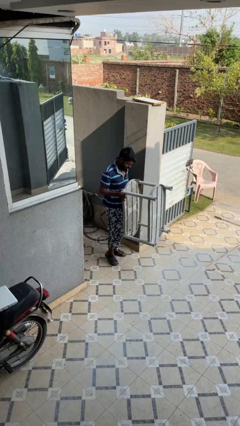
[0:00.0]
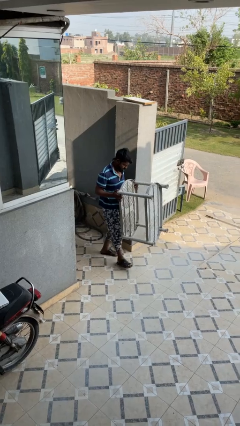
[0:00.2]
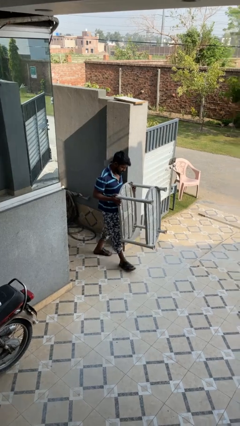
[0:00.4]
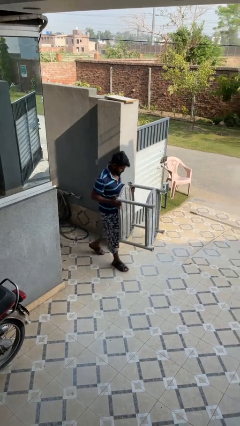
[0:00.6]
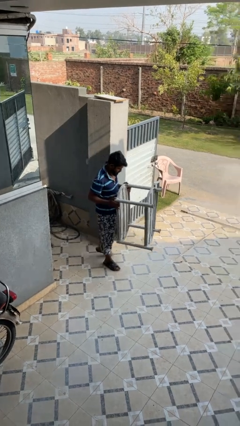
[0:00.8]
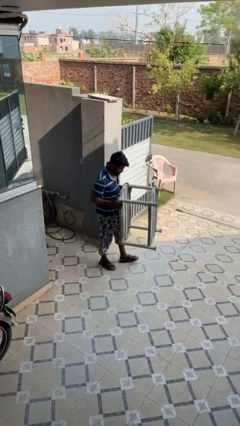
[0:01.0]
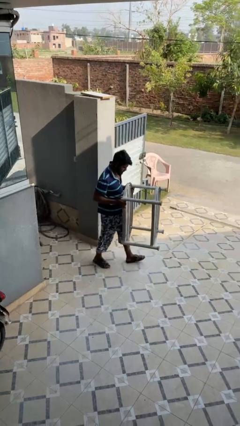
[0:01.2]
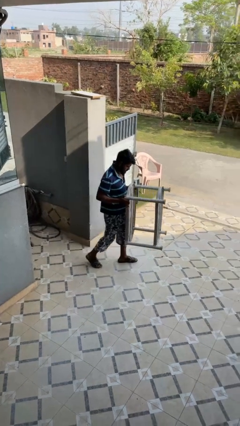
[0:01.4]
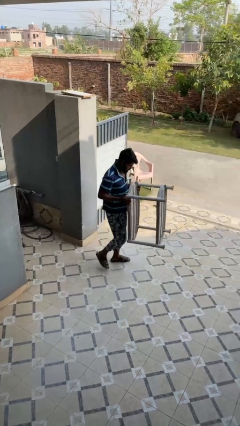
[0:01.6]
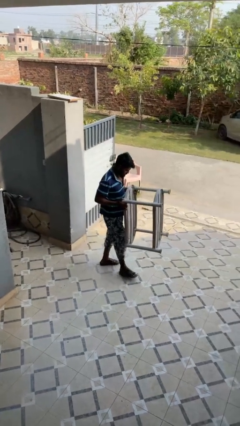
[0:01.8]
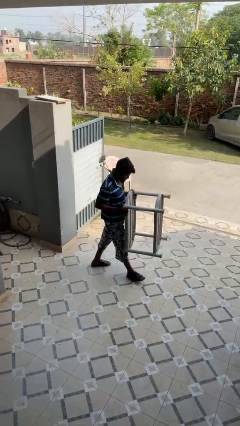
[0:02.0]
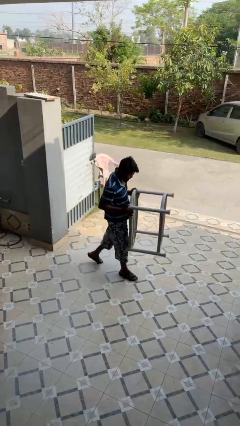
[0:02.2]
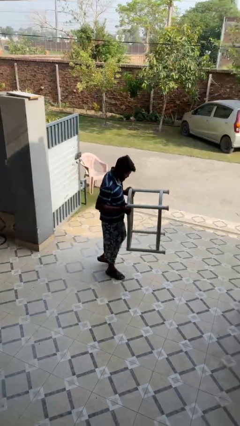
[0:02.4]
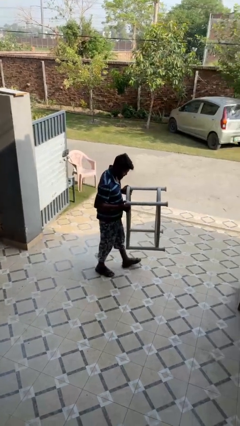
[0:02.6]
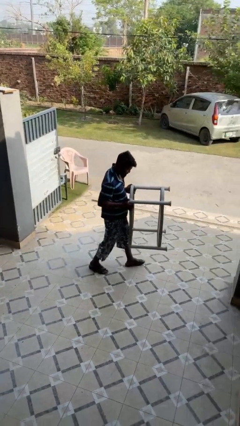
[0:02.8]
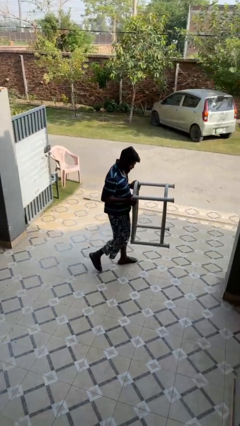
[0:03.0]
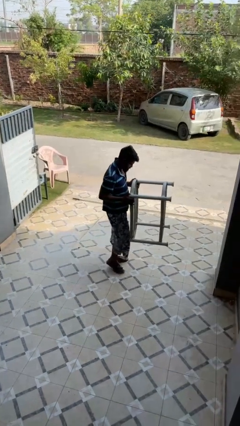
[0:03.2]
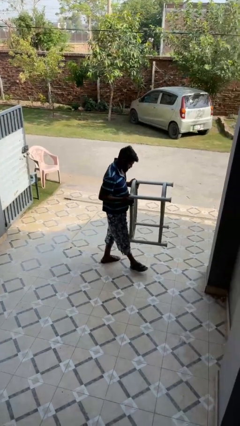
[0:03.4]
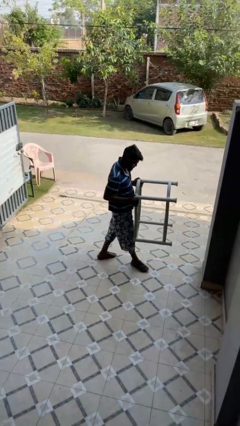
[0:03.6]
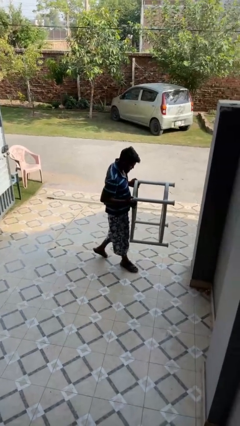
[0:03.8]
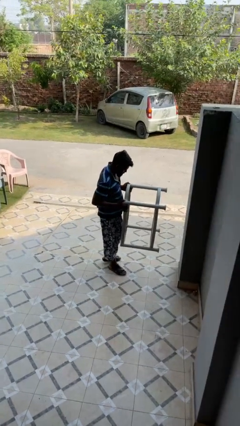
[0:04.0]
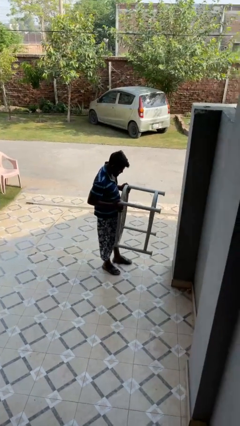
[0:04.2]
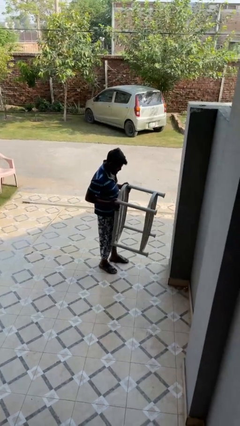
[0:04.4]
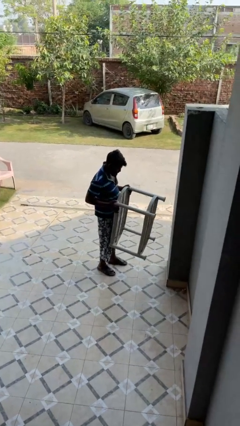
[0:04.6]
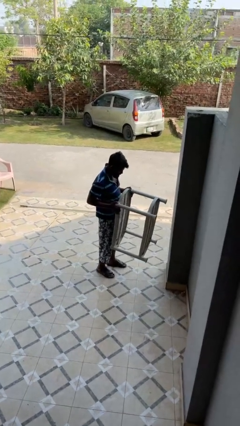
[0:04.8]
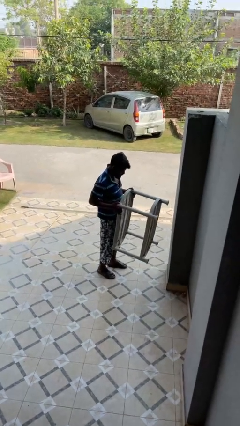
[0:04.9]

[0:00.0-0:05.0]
person carries furniture

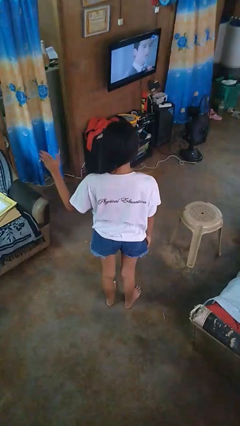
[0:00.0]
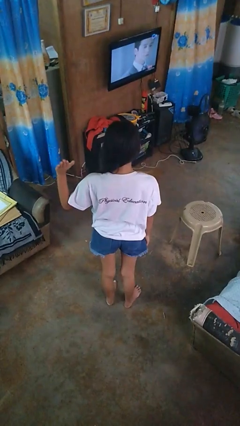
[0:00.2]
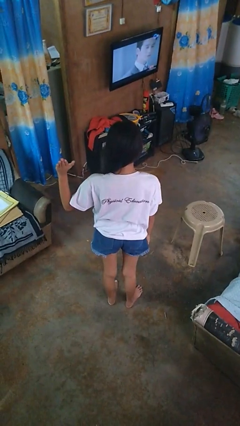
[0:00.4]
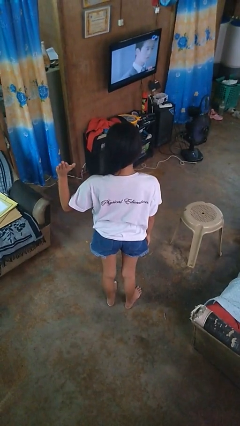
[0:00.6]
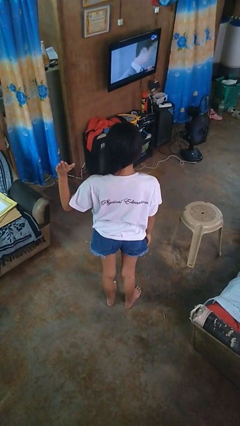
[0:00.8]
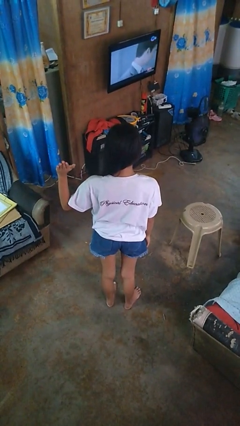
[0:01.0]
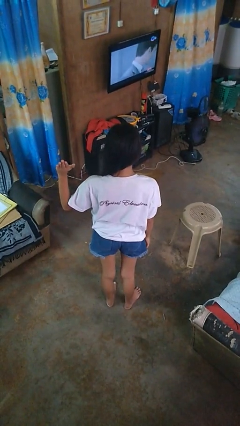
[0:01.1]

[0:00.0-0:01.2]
person gestures number five

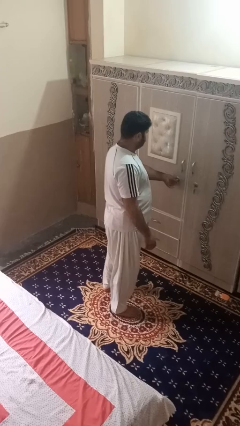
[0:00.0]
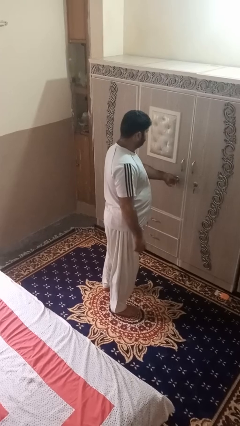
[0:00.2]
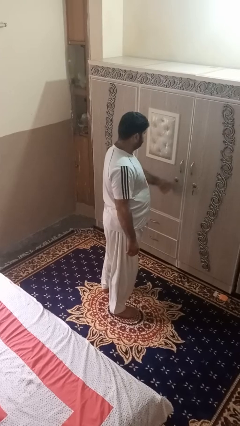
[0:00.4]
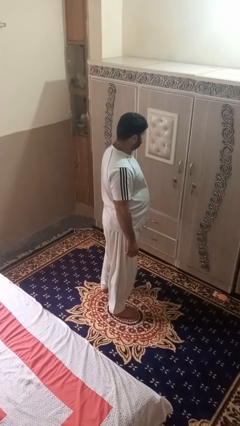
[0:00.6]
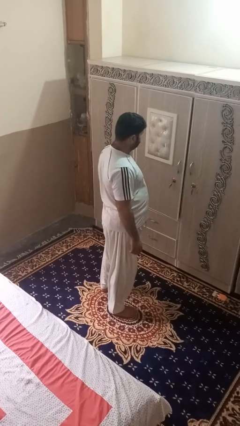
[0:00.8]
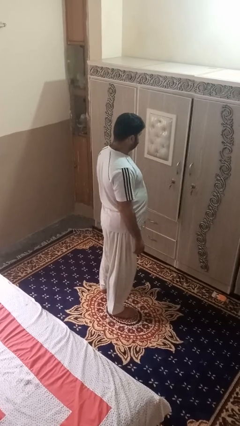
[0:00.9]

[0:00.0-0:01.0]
person closes dresser drawer

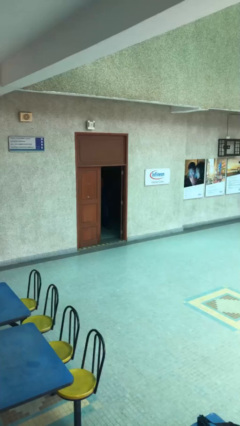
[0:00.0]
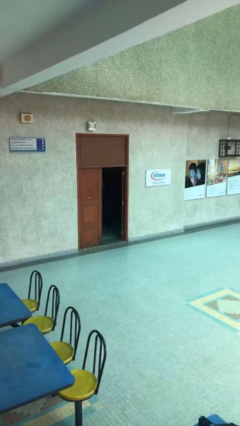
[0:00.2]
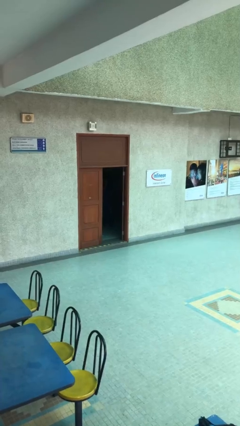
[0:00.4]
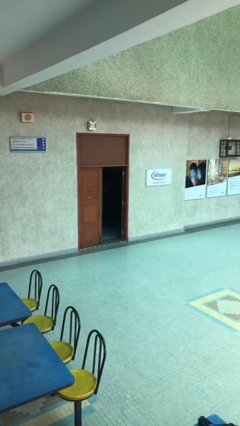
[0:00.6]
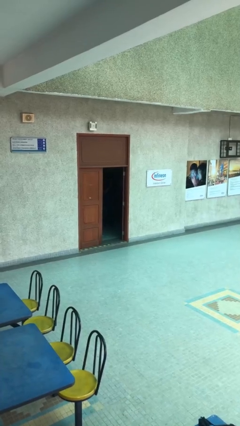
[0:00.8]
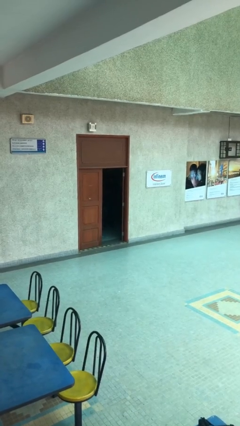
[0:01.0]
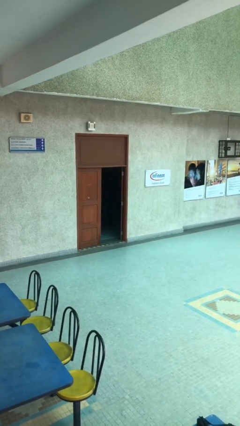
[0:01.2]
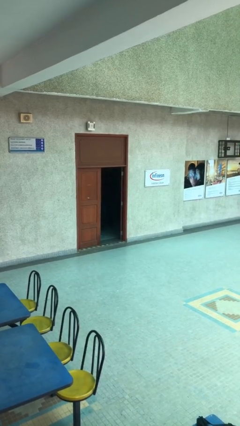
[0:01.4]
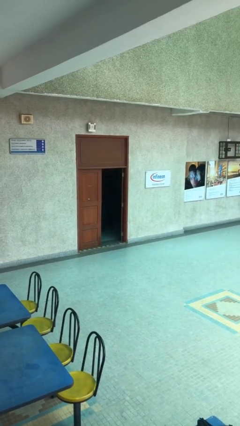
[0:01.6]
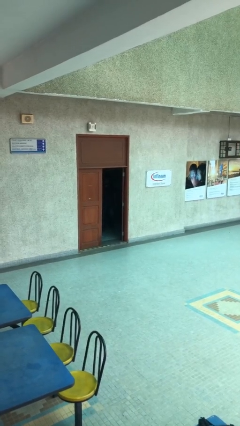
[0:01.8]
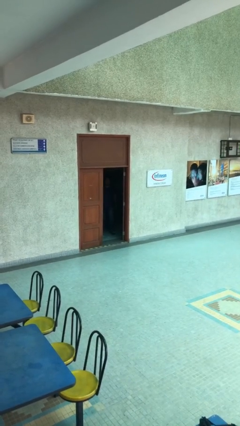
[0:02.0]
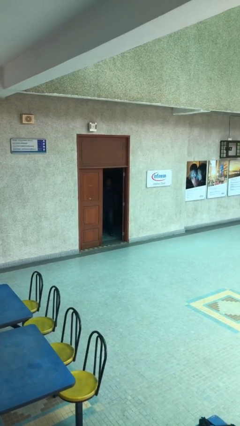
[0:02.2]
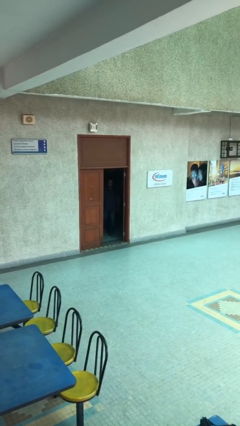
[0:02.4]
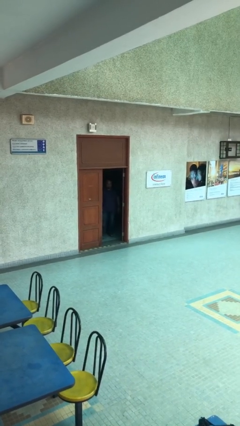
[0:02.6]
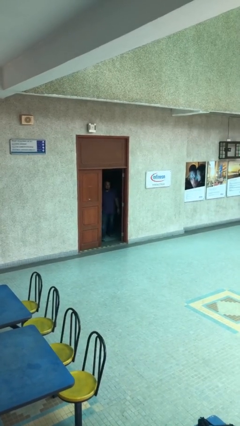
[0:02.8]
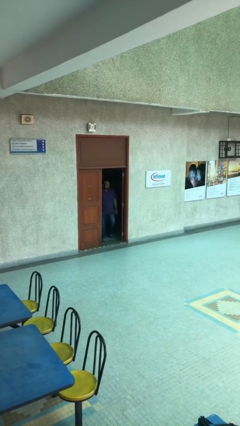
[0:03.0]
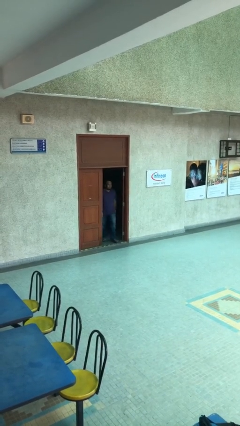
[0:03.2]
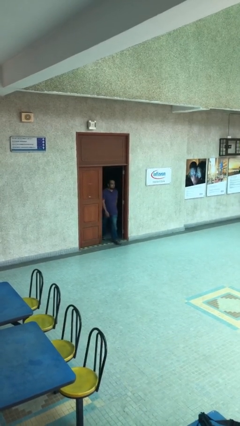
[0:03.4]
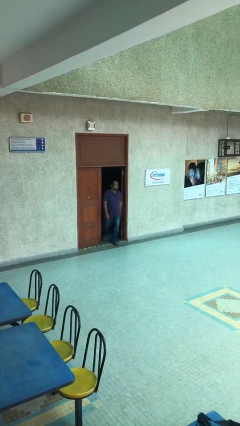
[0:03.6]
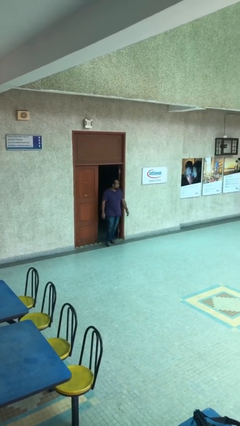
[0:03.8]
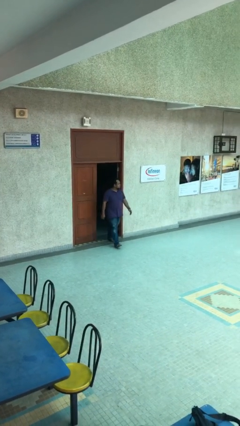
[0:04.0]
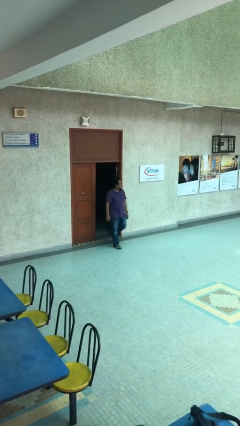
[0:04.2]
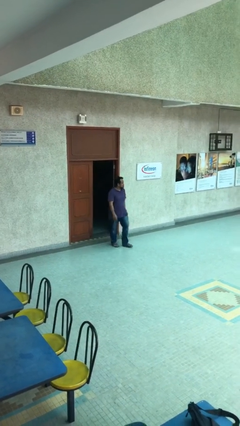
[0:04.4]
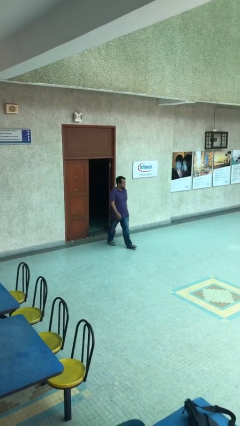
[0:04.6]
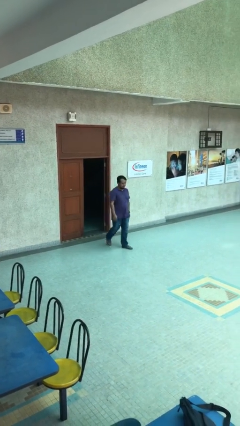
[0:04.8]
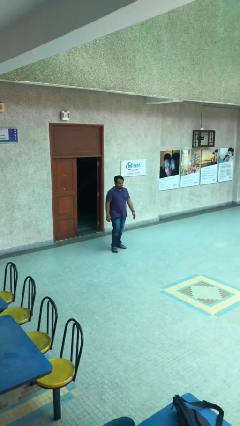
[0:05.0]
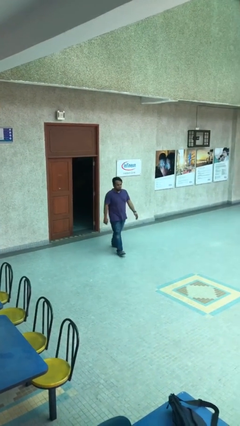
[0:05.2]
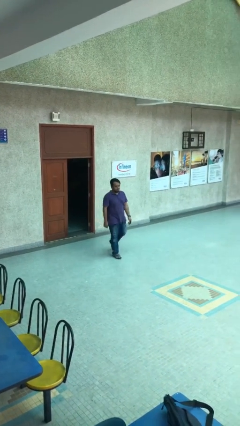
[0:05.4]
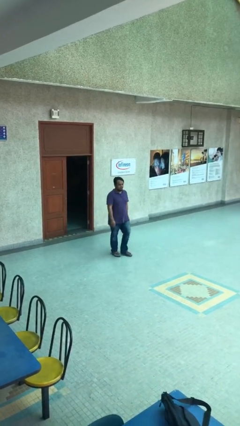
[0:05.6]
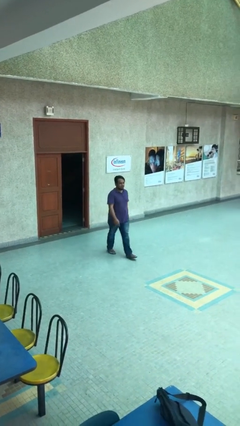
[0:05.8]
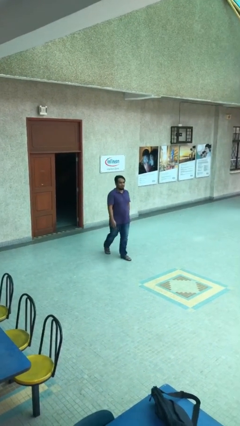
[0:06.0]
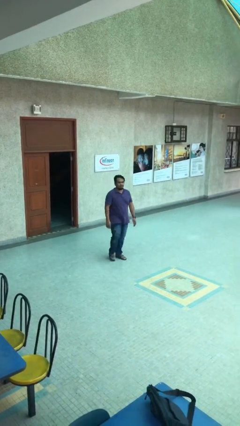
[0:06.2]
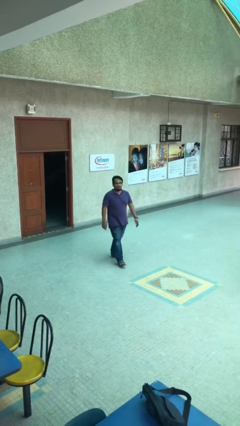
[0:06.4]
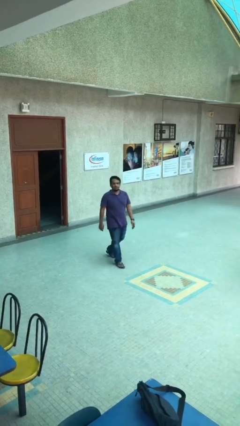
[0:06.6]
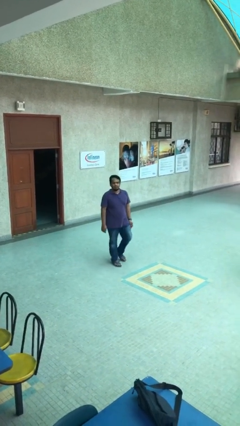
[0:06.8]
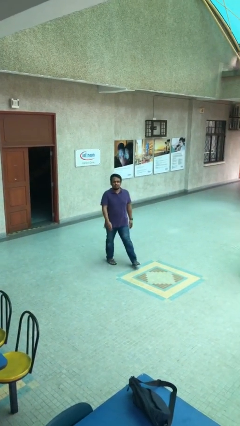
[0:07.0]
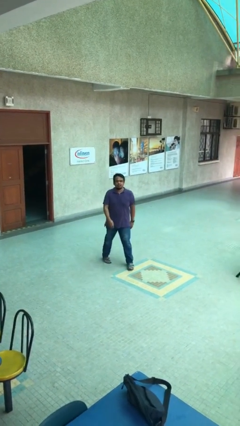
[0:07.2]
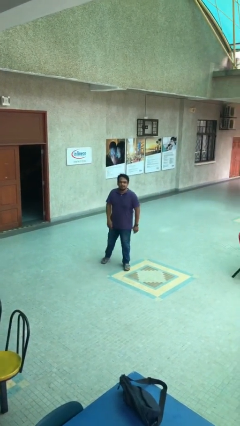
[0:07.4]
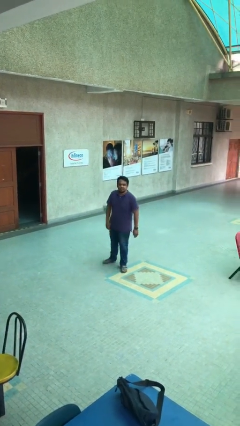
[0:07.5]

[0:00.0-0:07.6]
person enters scene through structure

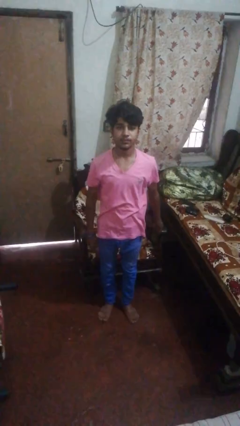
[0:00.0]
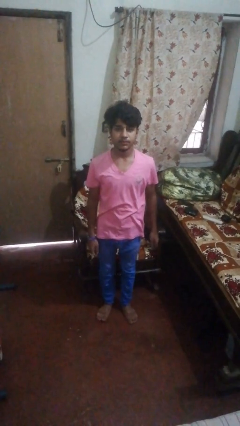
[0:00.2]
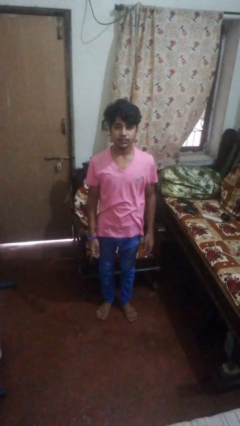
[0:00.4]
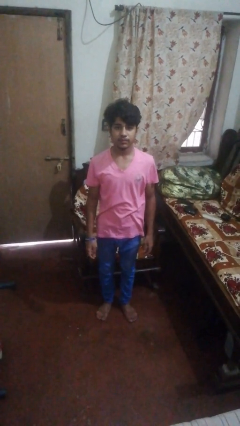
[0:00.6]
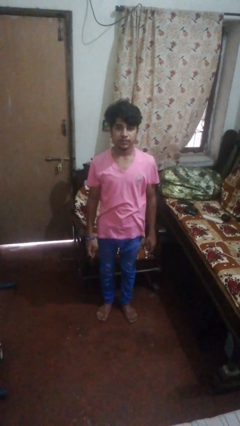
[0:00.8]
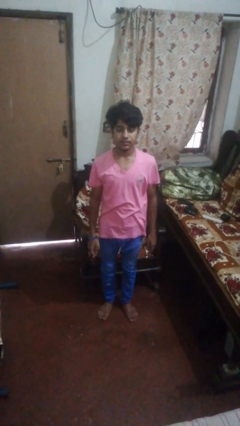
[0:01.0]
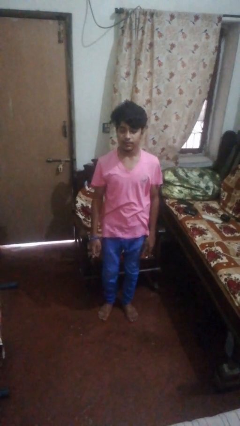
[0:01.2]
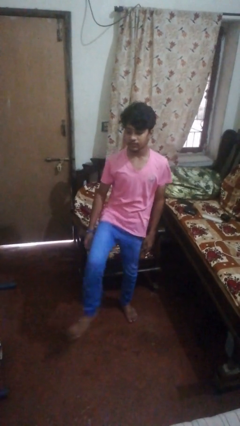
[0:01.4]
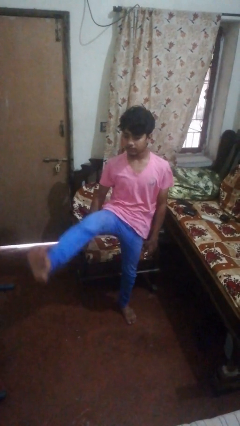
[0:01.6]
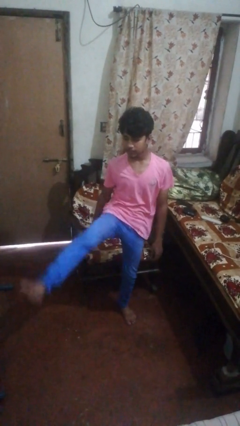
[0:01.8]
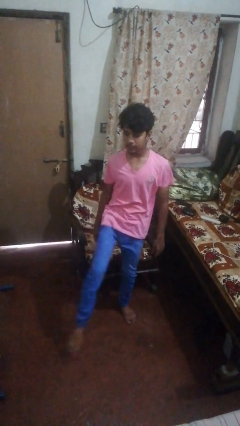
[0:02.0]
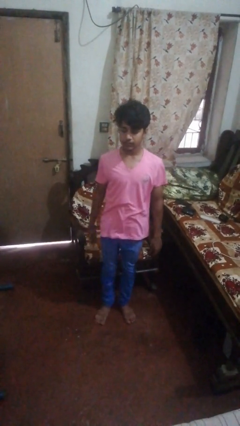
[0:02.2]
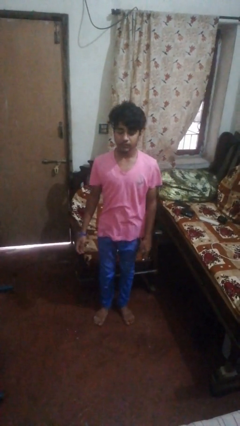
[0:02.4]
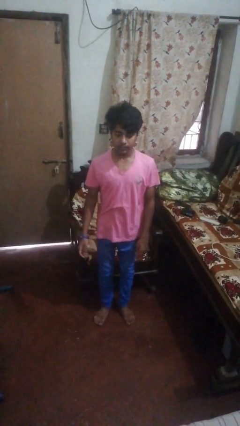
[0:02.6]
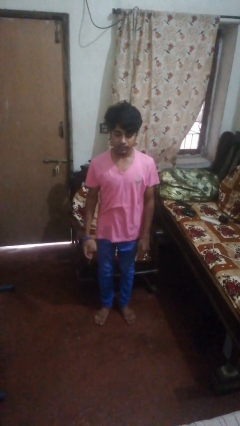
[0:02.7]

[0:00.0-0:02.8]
person karate kicks
